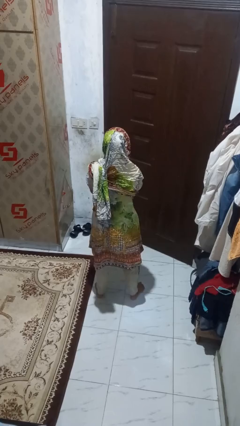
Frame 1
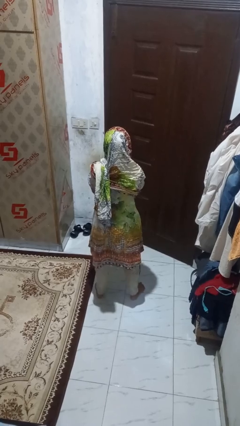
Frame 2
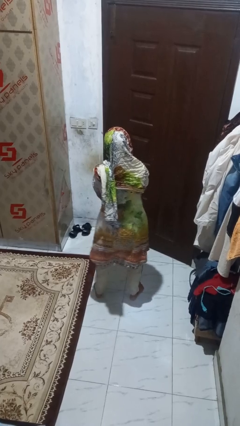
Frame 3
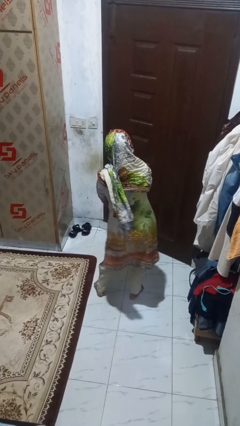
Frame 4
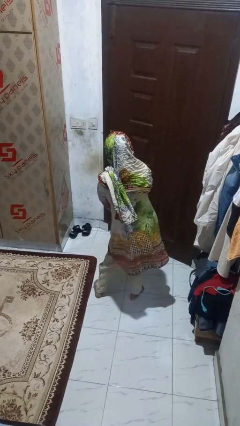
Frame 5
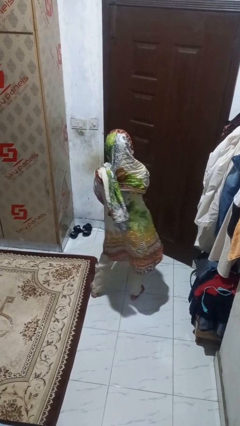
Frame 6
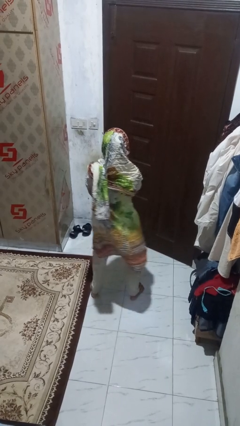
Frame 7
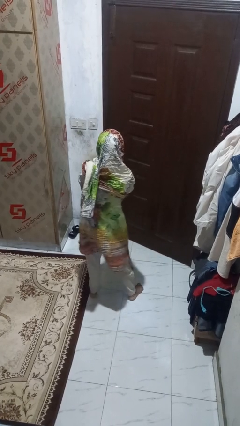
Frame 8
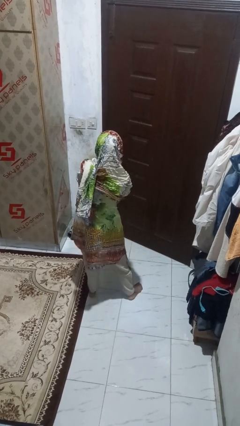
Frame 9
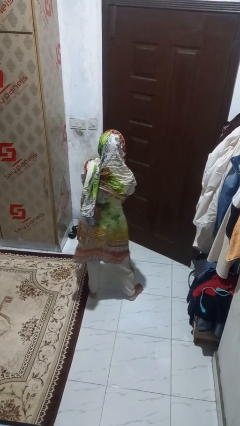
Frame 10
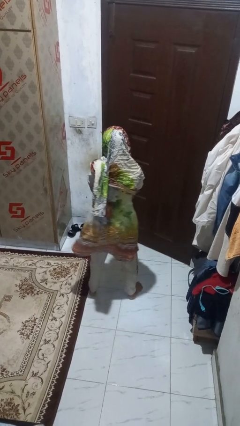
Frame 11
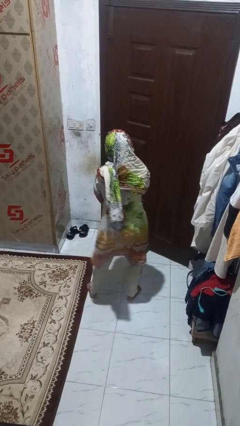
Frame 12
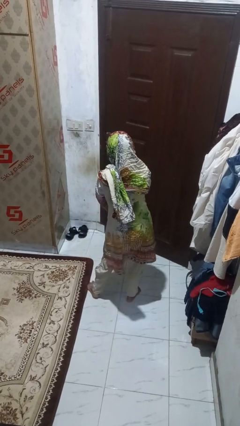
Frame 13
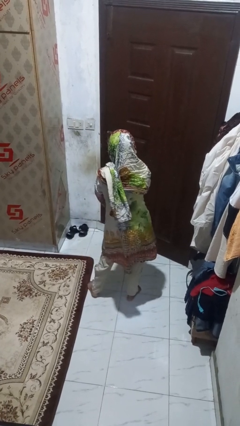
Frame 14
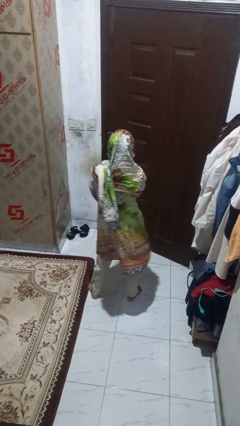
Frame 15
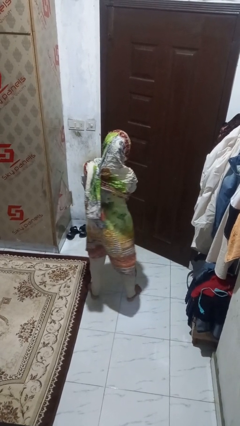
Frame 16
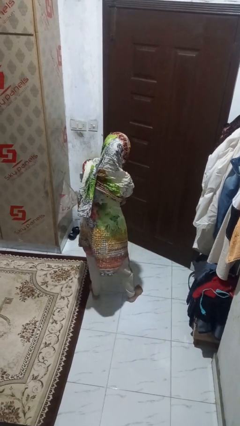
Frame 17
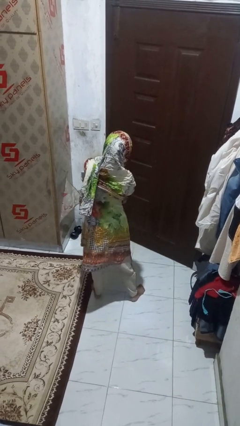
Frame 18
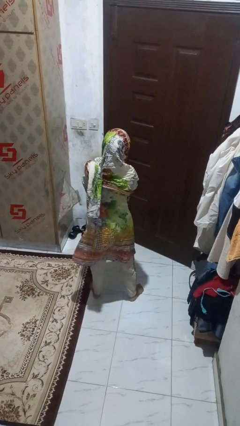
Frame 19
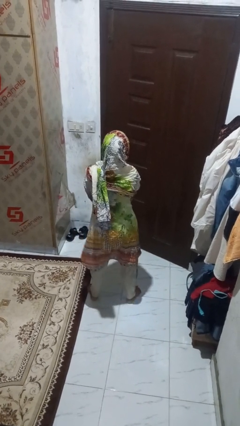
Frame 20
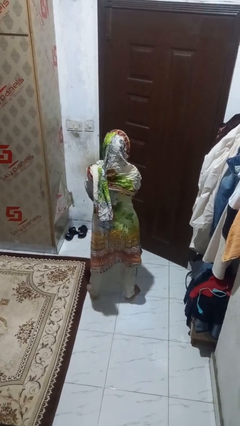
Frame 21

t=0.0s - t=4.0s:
person wiggles hips

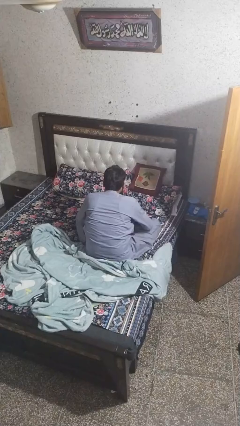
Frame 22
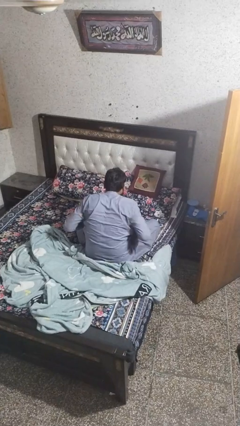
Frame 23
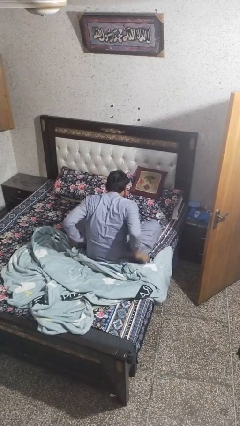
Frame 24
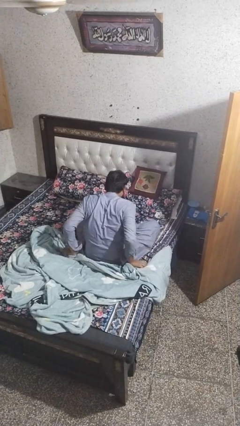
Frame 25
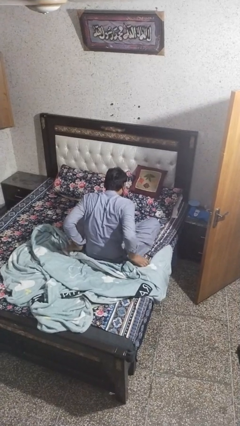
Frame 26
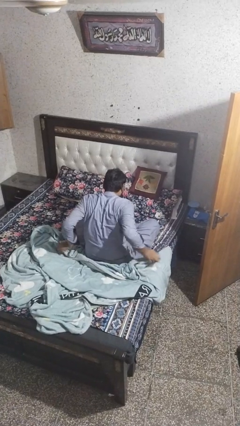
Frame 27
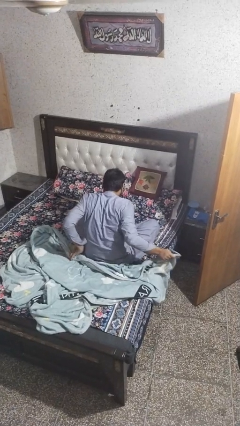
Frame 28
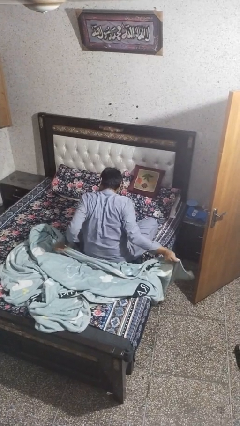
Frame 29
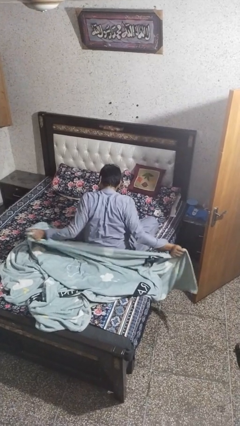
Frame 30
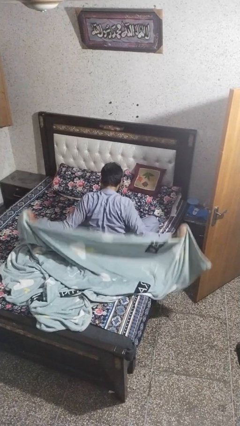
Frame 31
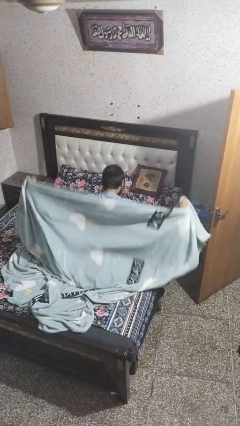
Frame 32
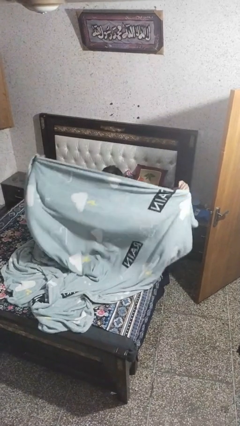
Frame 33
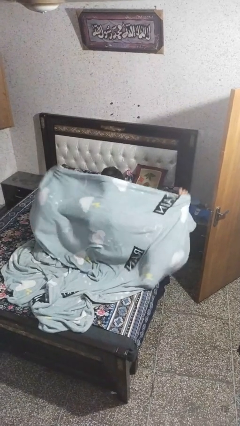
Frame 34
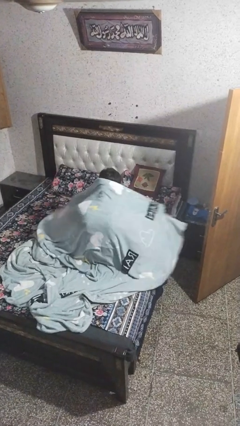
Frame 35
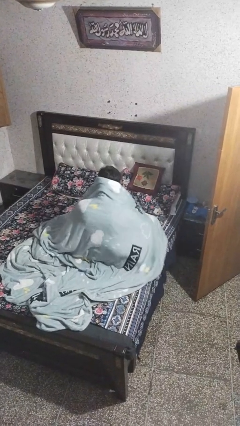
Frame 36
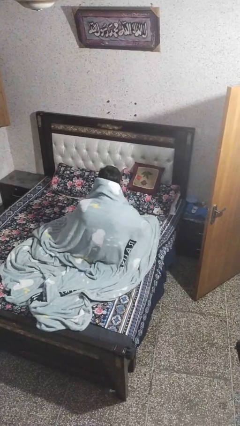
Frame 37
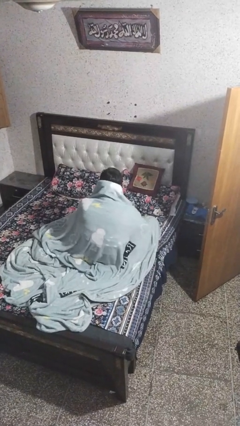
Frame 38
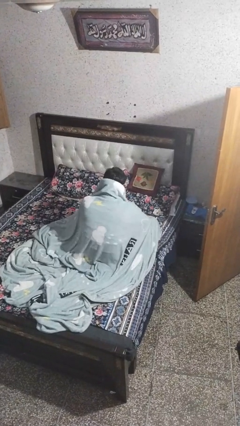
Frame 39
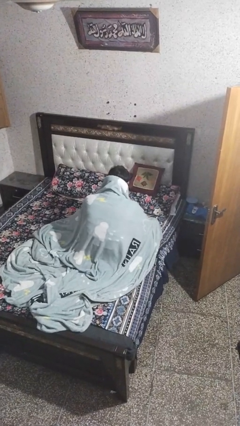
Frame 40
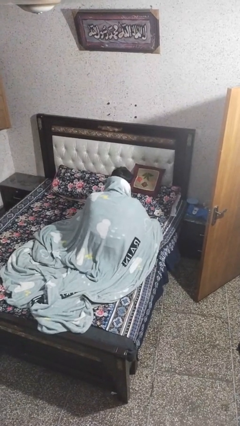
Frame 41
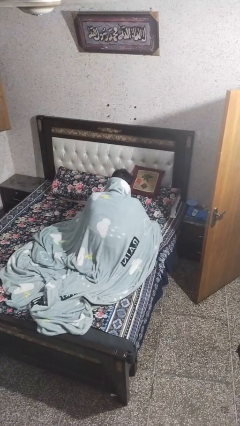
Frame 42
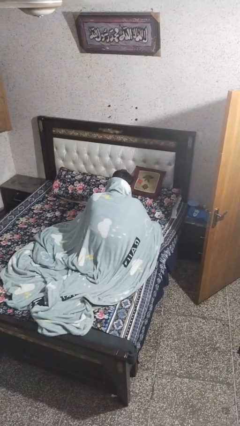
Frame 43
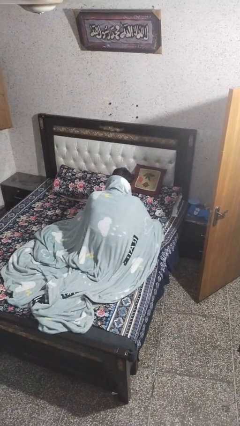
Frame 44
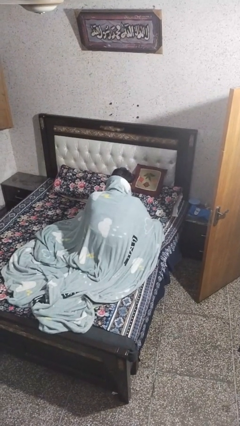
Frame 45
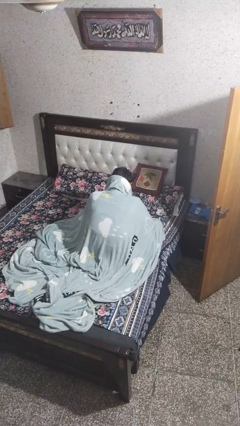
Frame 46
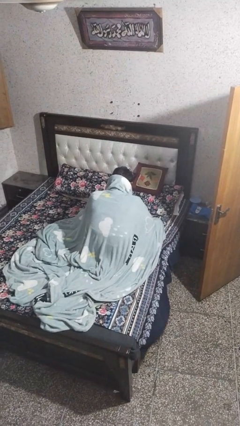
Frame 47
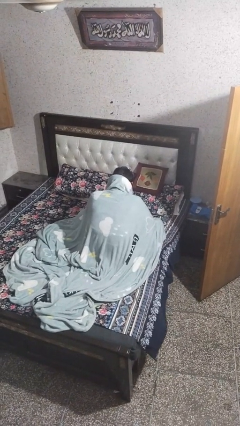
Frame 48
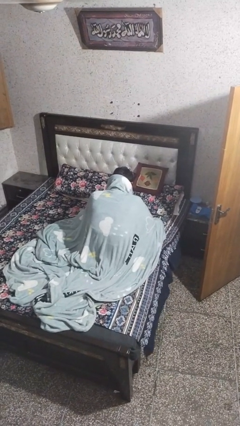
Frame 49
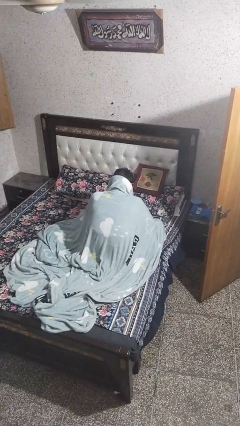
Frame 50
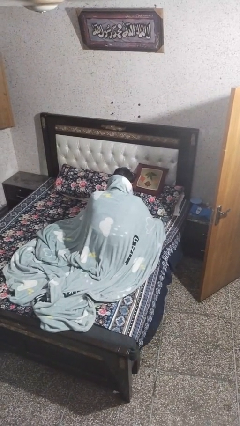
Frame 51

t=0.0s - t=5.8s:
person covers with blanket

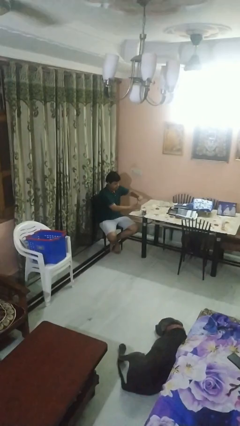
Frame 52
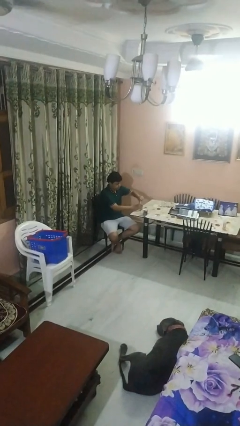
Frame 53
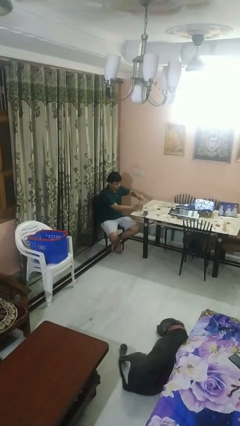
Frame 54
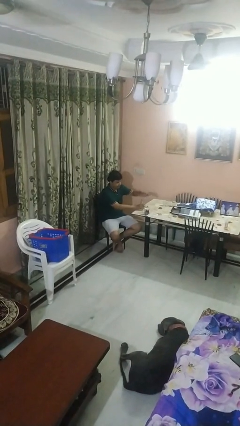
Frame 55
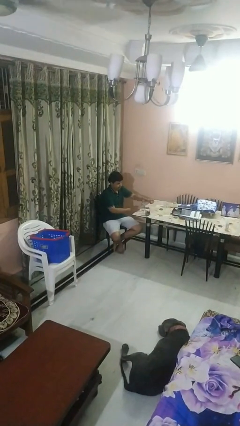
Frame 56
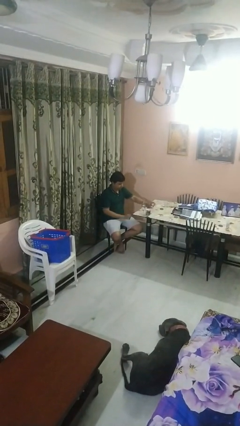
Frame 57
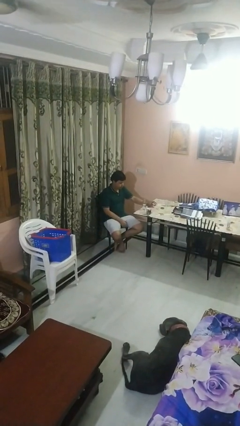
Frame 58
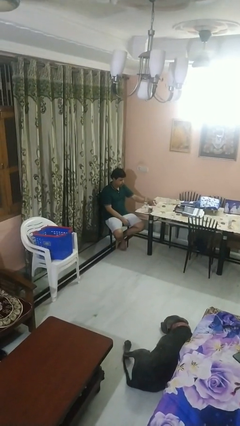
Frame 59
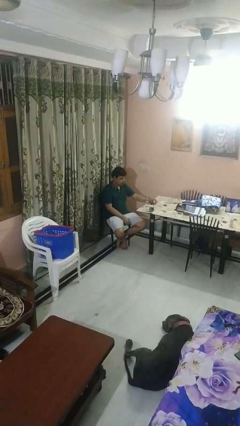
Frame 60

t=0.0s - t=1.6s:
person unscrews lid from bottle

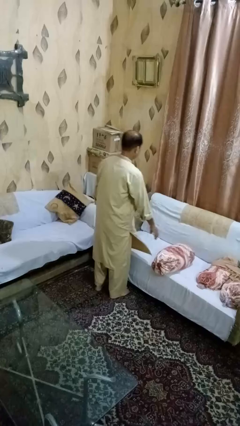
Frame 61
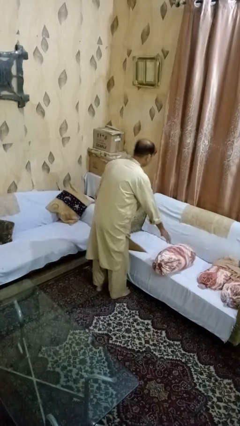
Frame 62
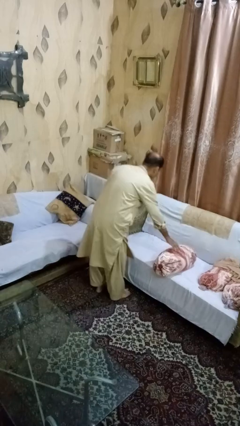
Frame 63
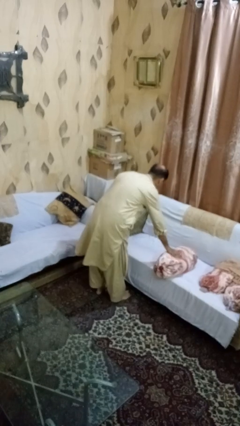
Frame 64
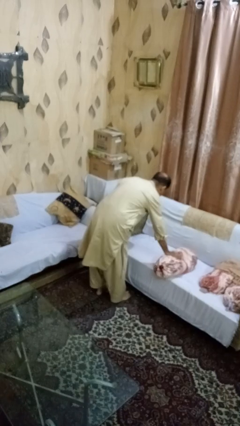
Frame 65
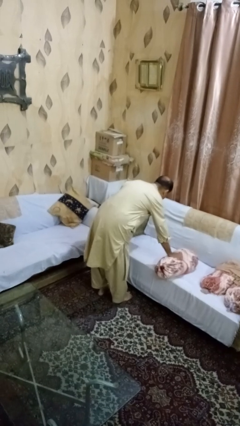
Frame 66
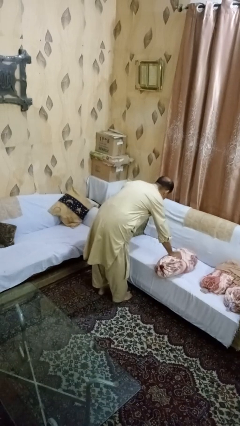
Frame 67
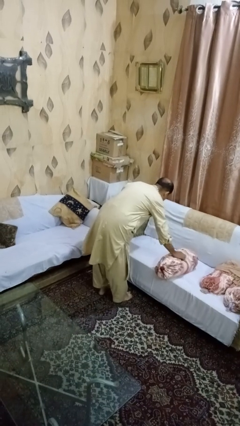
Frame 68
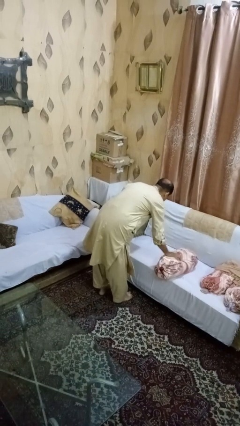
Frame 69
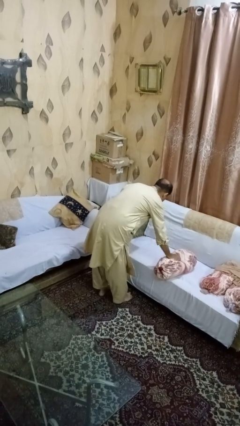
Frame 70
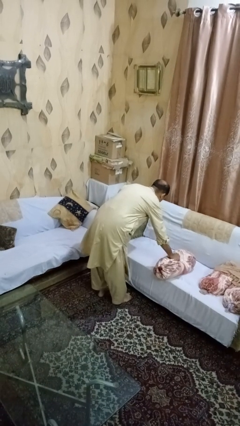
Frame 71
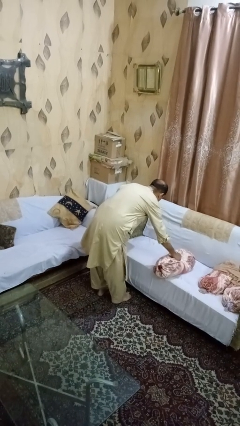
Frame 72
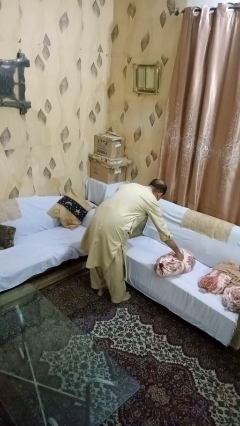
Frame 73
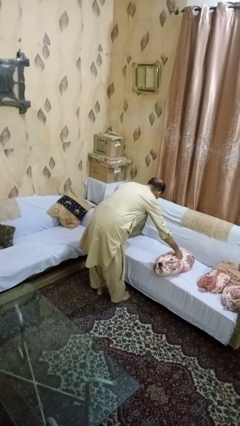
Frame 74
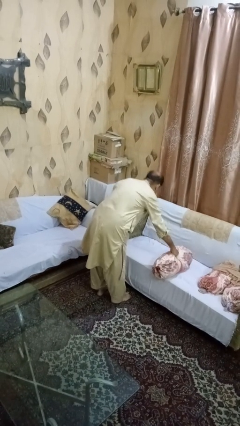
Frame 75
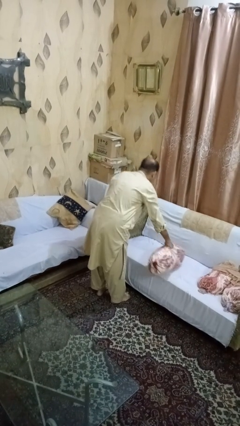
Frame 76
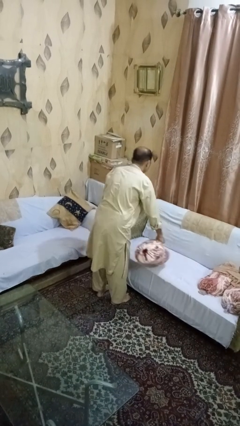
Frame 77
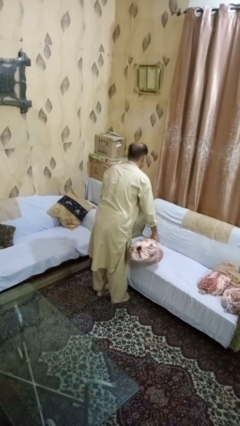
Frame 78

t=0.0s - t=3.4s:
person picks up object from couch

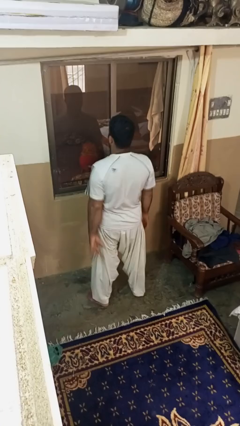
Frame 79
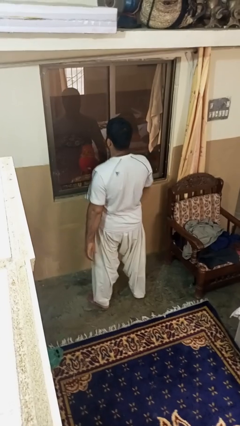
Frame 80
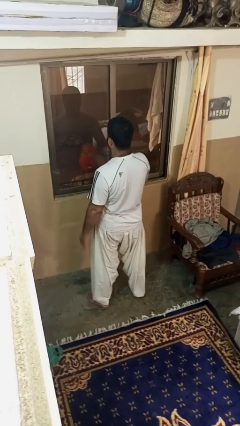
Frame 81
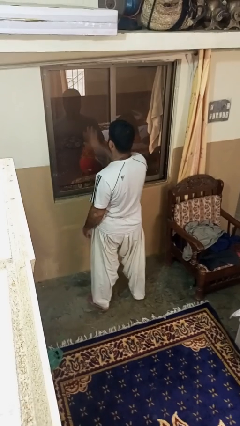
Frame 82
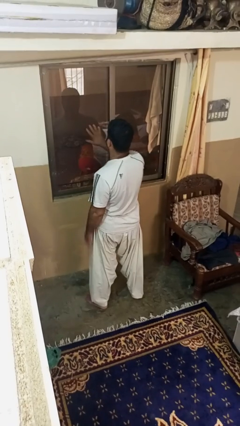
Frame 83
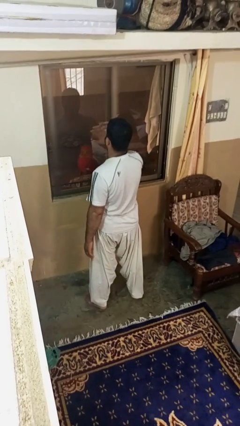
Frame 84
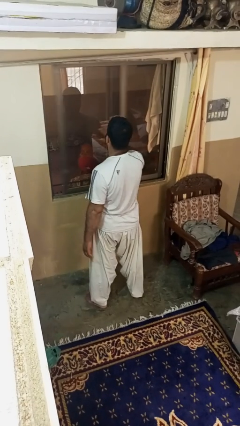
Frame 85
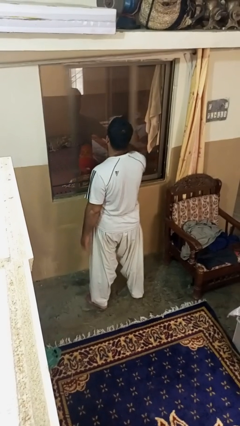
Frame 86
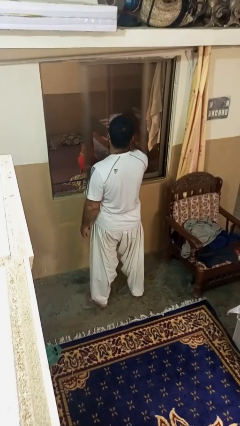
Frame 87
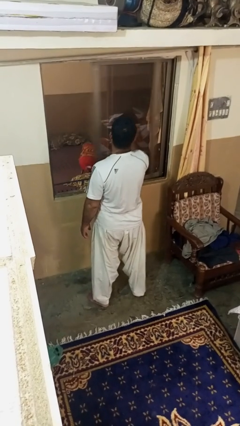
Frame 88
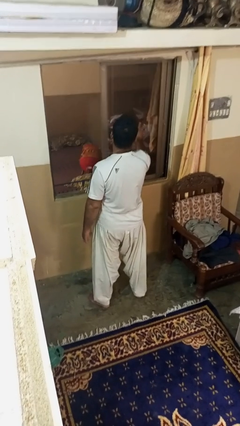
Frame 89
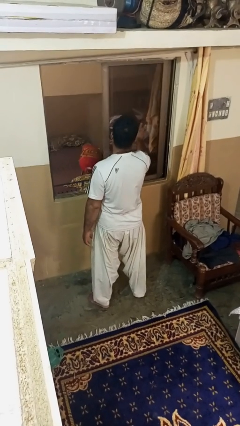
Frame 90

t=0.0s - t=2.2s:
person opens home window

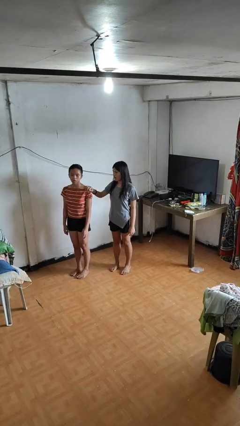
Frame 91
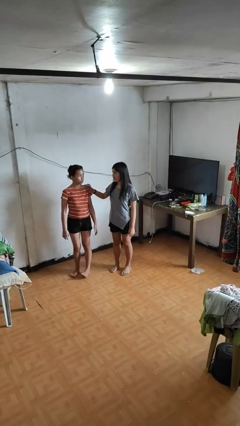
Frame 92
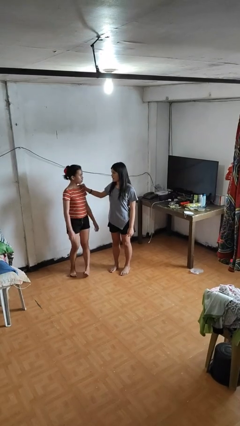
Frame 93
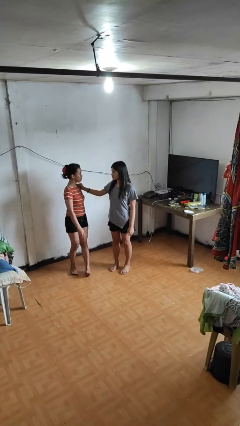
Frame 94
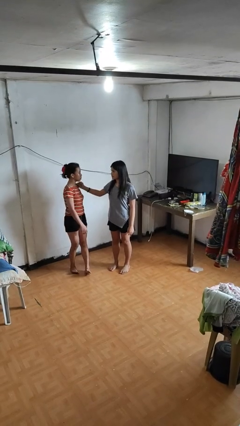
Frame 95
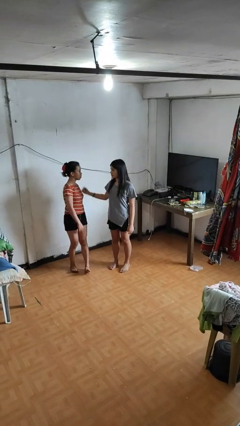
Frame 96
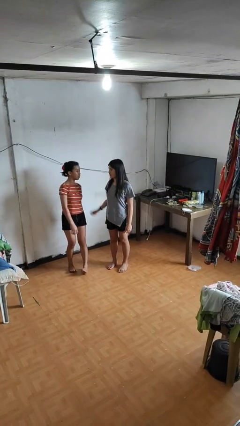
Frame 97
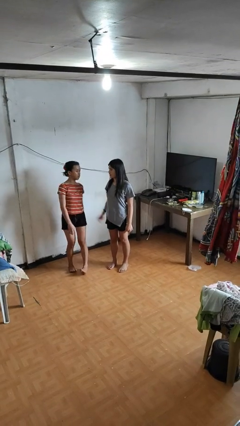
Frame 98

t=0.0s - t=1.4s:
person spins person around
